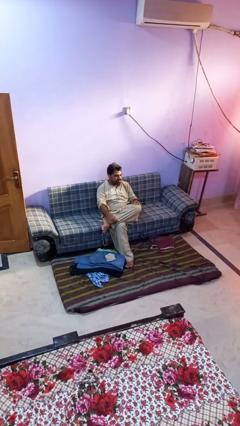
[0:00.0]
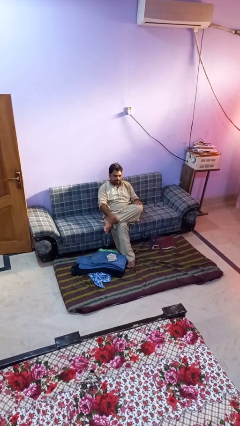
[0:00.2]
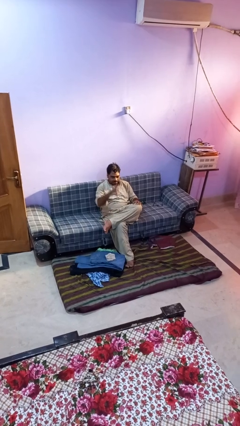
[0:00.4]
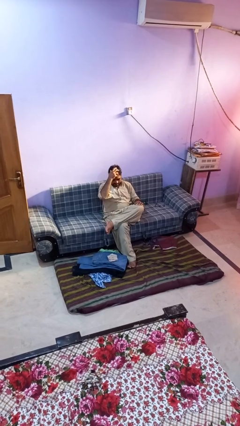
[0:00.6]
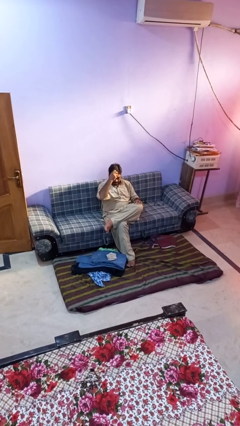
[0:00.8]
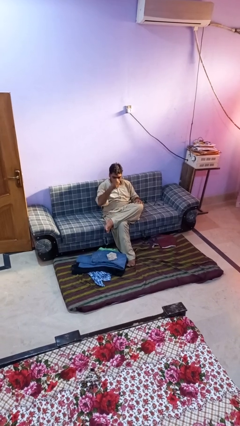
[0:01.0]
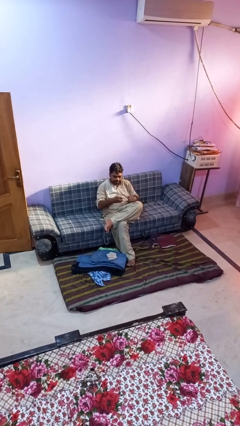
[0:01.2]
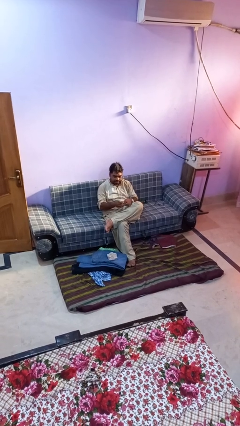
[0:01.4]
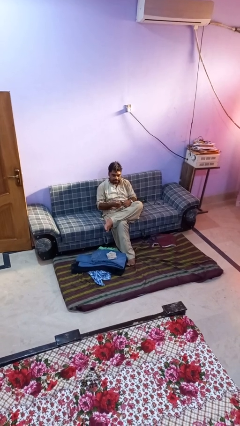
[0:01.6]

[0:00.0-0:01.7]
person takes off hairtie

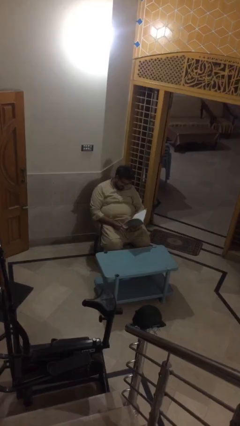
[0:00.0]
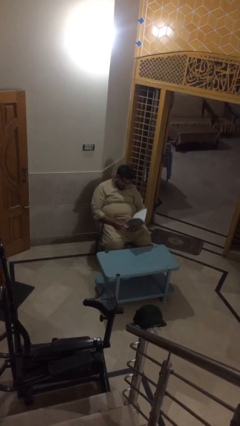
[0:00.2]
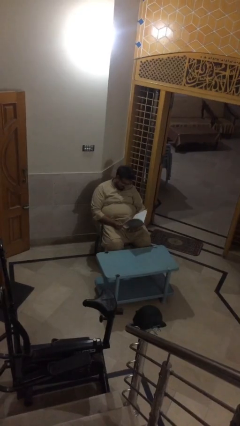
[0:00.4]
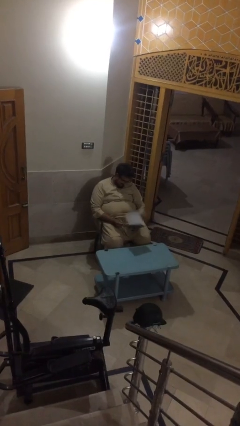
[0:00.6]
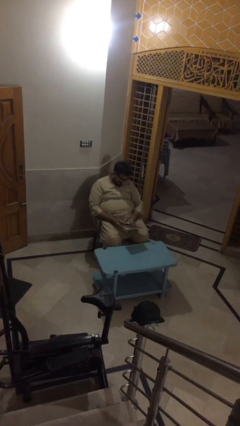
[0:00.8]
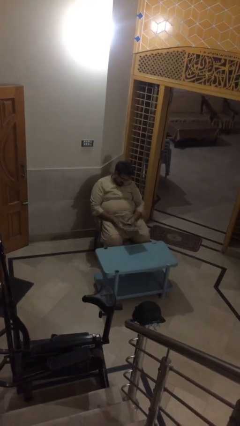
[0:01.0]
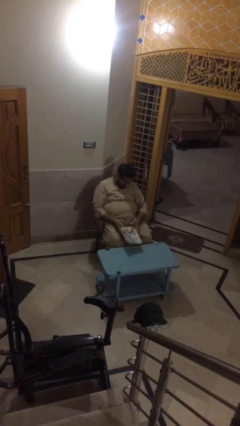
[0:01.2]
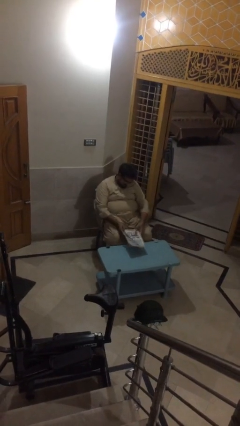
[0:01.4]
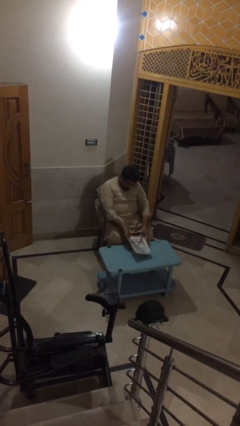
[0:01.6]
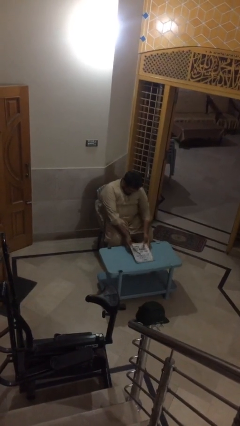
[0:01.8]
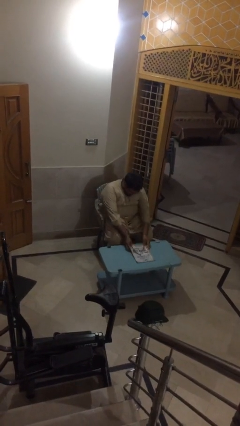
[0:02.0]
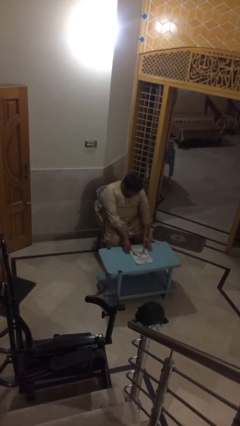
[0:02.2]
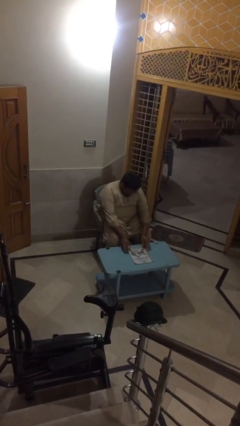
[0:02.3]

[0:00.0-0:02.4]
person puts down object on table

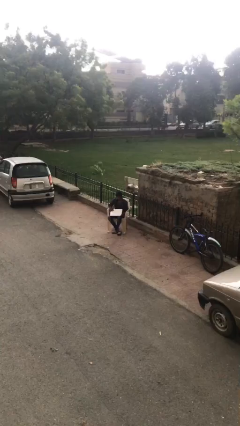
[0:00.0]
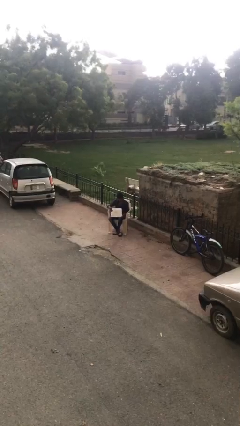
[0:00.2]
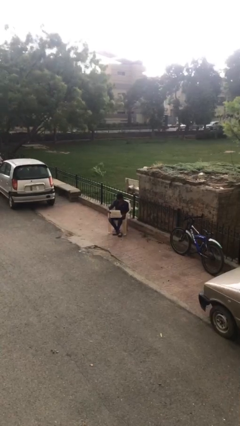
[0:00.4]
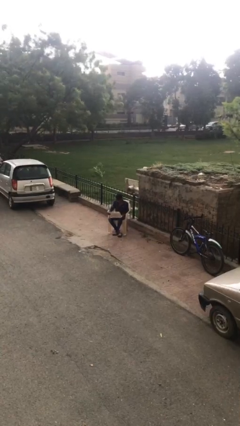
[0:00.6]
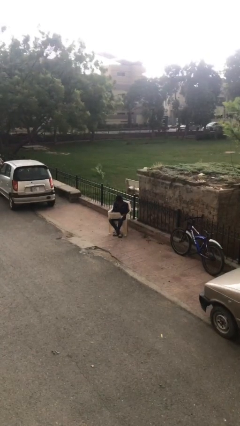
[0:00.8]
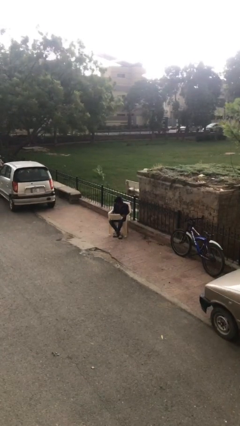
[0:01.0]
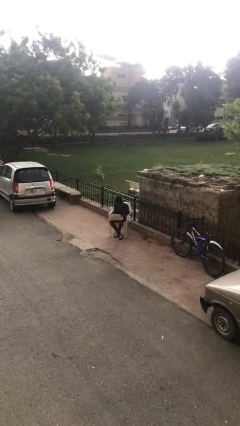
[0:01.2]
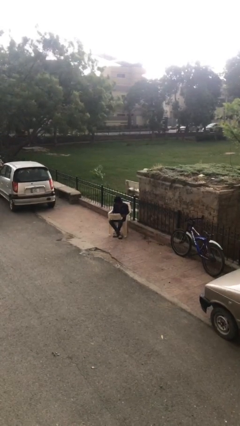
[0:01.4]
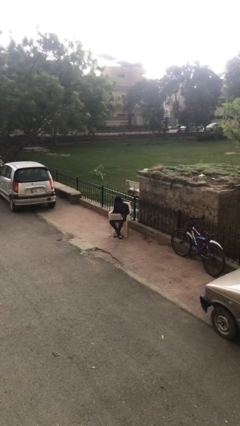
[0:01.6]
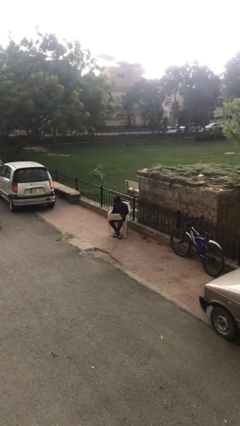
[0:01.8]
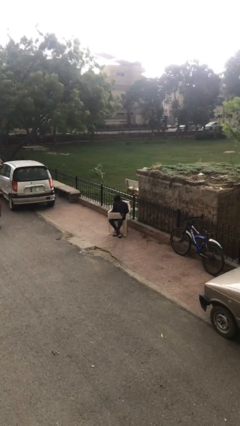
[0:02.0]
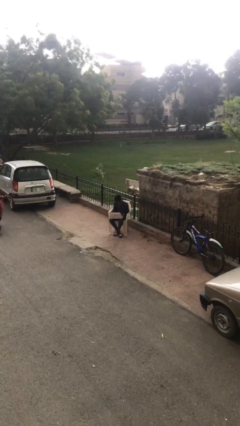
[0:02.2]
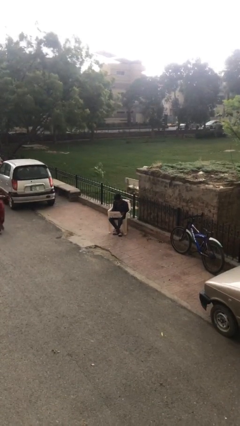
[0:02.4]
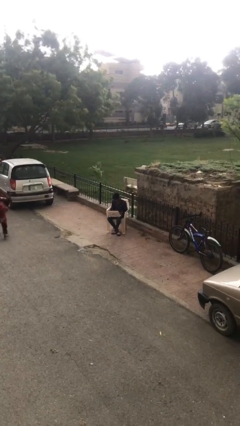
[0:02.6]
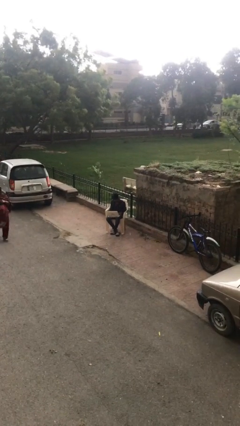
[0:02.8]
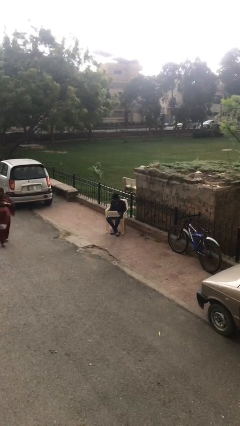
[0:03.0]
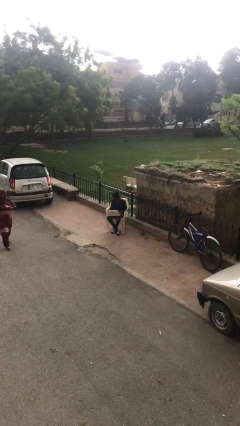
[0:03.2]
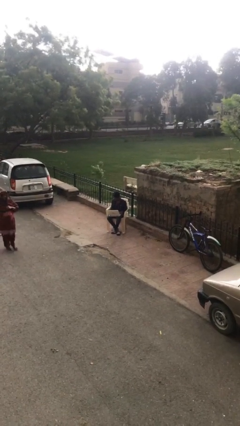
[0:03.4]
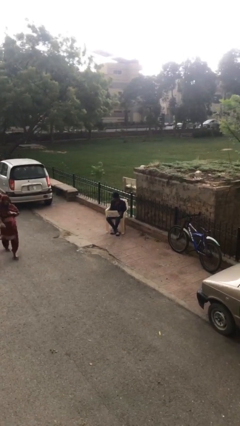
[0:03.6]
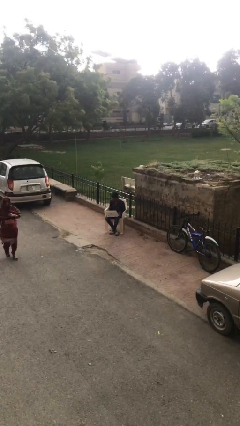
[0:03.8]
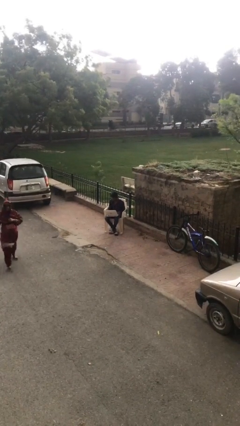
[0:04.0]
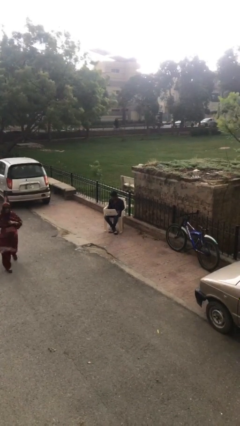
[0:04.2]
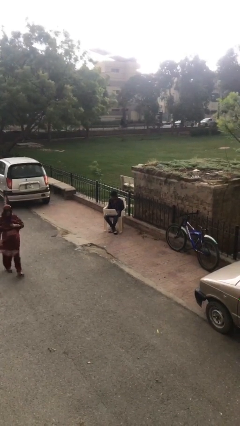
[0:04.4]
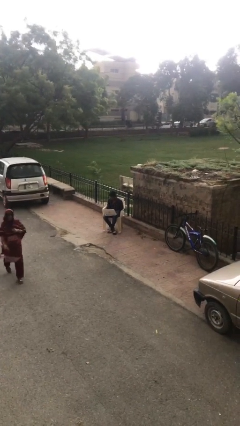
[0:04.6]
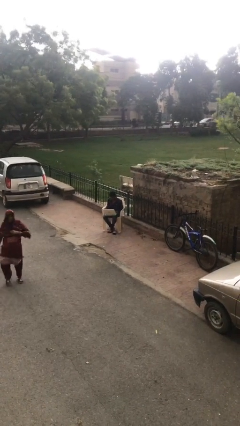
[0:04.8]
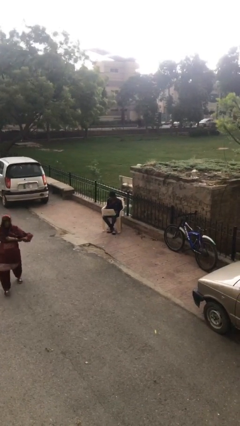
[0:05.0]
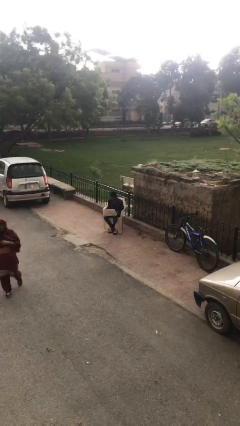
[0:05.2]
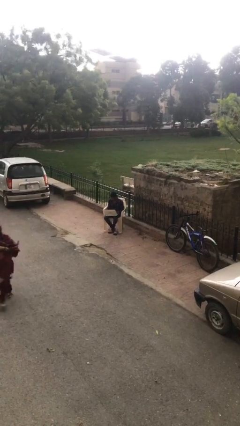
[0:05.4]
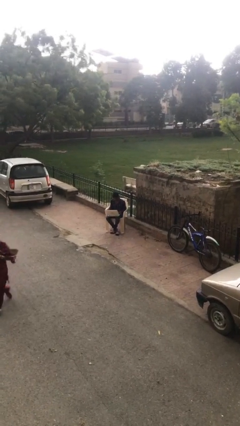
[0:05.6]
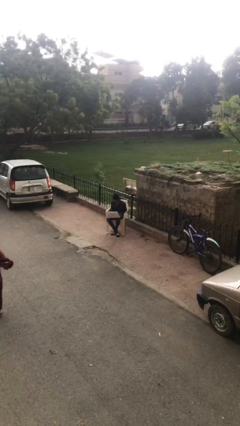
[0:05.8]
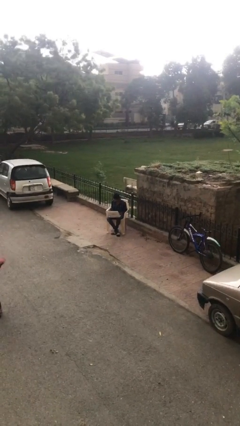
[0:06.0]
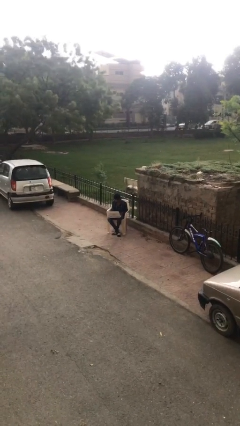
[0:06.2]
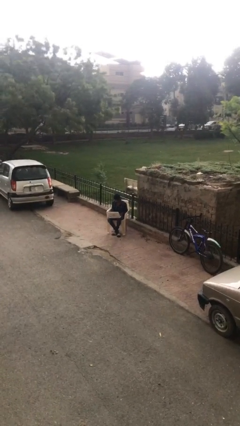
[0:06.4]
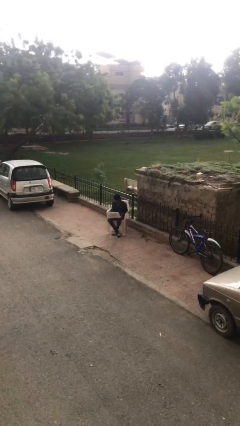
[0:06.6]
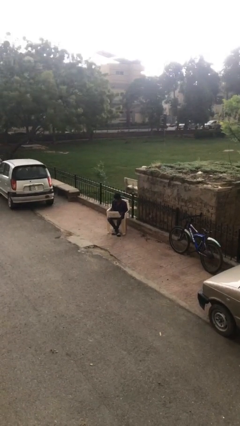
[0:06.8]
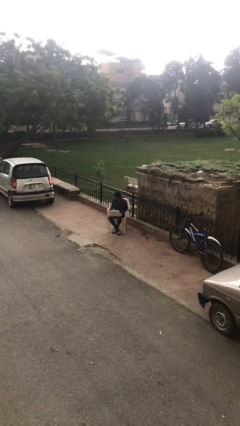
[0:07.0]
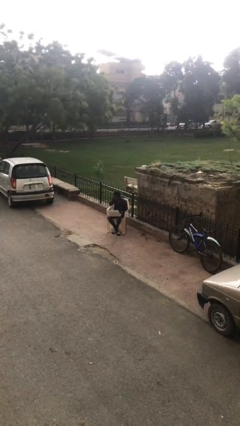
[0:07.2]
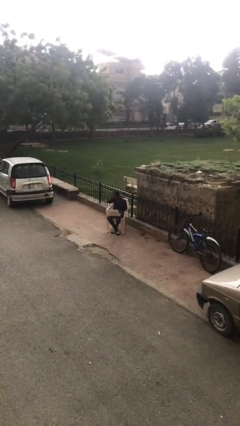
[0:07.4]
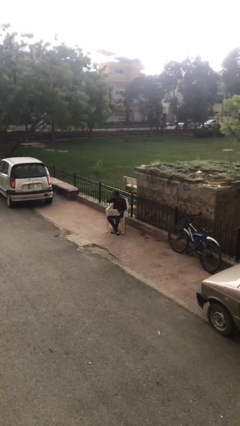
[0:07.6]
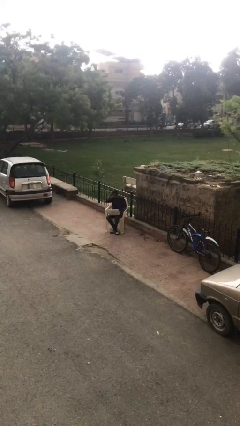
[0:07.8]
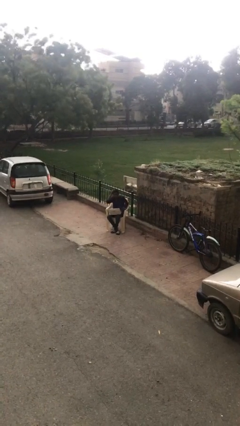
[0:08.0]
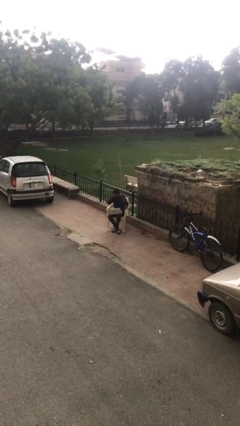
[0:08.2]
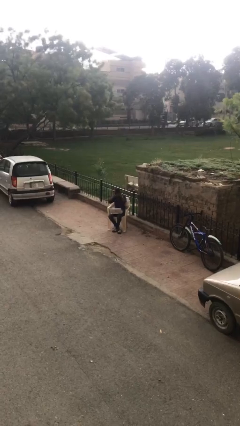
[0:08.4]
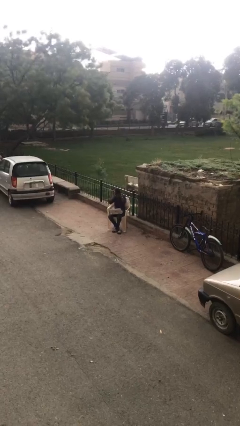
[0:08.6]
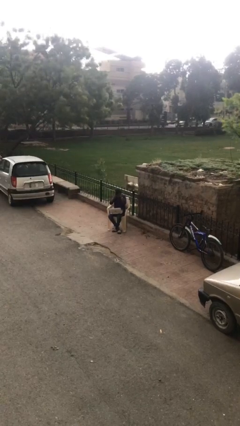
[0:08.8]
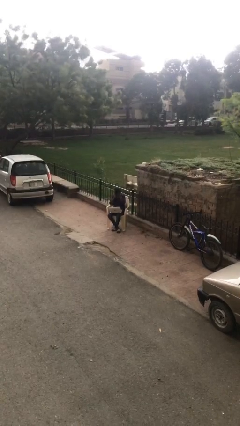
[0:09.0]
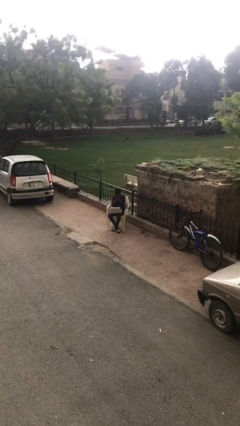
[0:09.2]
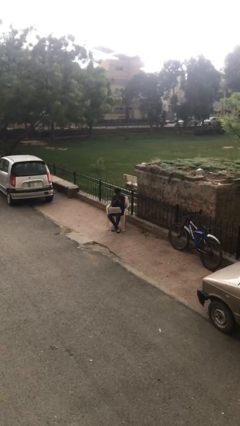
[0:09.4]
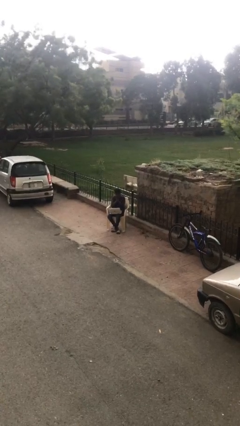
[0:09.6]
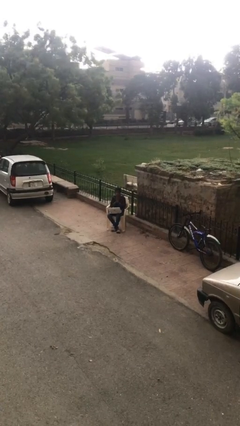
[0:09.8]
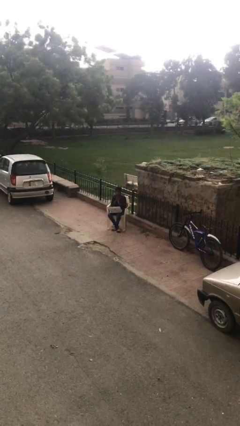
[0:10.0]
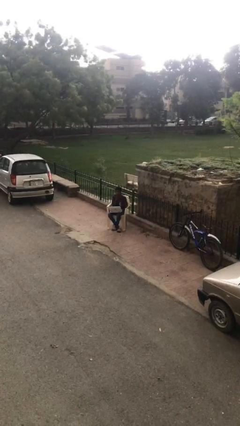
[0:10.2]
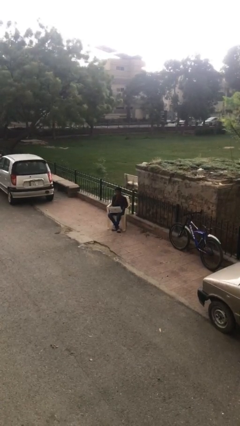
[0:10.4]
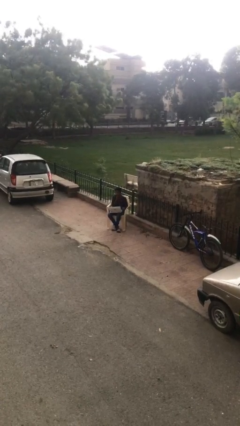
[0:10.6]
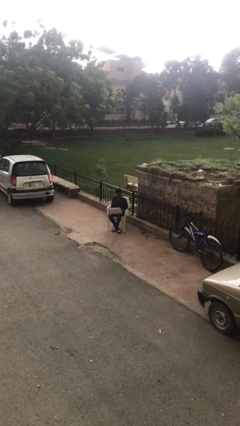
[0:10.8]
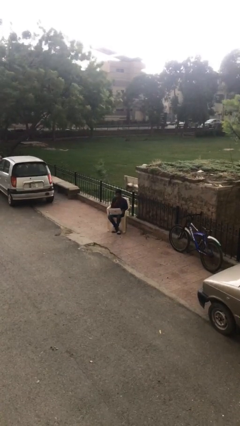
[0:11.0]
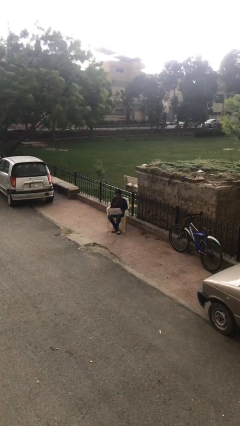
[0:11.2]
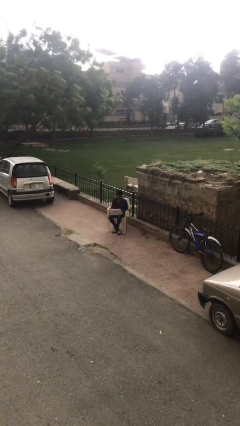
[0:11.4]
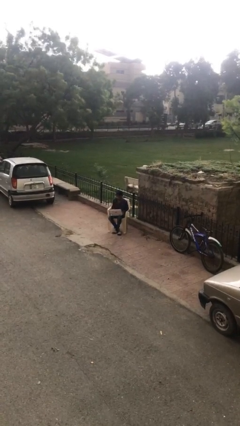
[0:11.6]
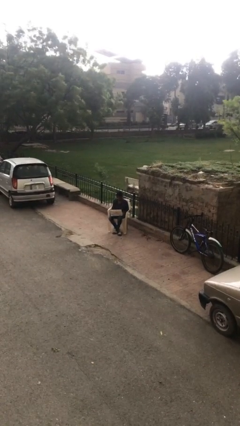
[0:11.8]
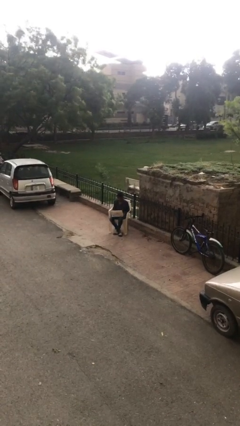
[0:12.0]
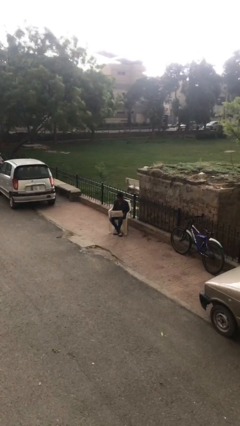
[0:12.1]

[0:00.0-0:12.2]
person interacts with laptop

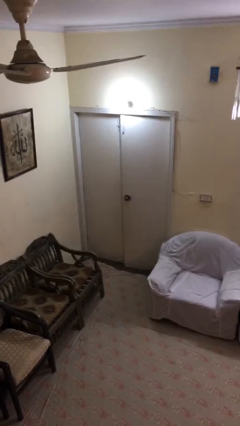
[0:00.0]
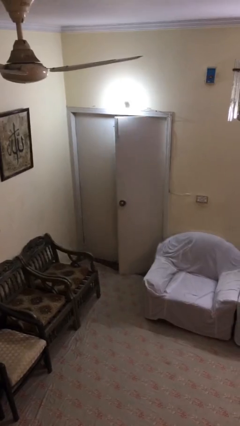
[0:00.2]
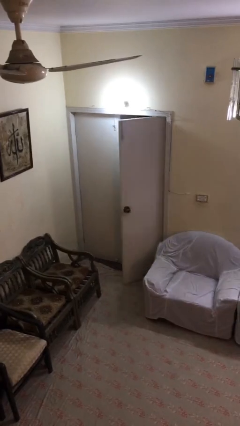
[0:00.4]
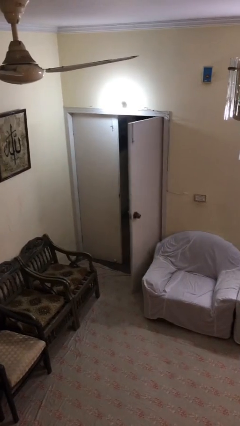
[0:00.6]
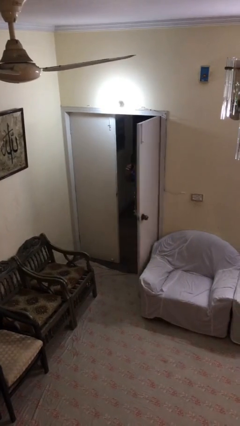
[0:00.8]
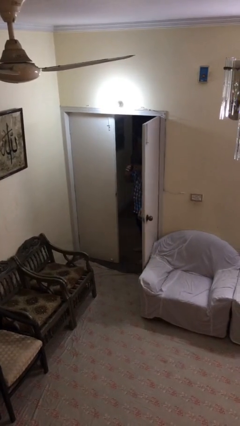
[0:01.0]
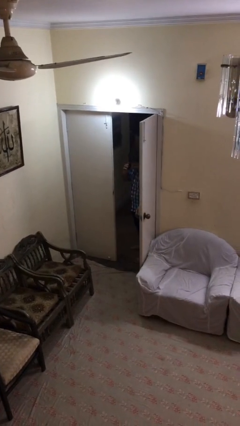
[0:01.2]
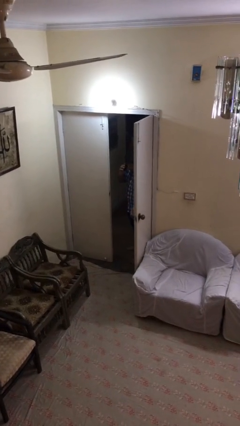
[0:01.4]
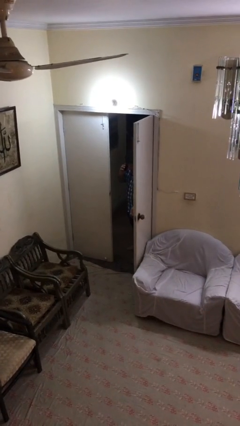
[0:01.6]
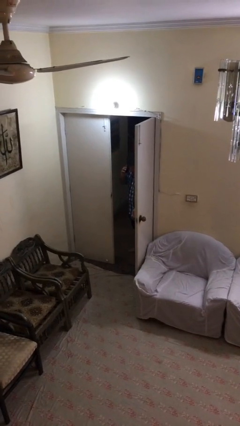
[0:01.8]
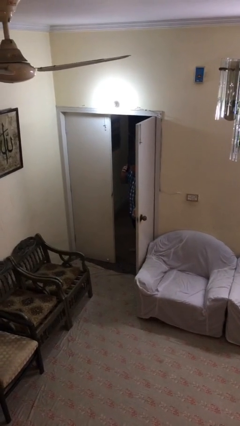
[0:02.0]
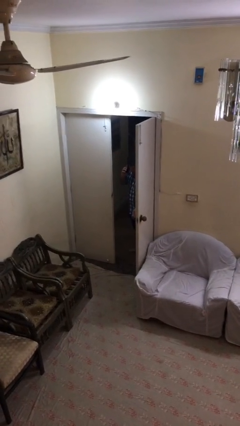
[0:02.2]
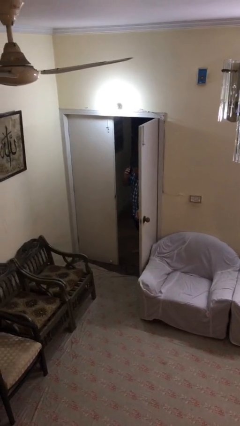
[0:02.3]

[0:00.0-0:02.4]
person opens facility door
